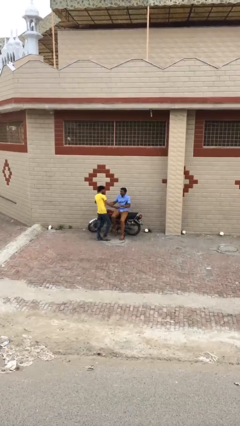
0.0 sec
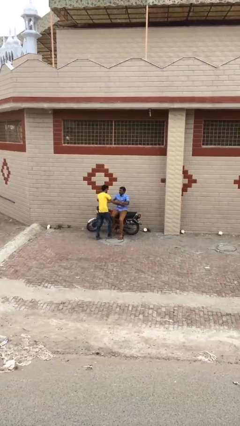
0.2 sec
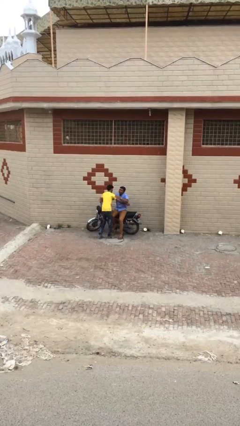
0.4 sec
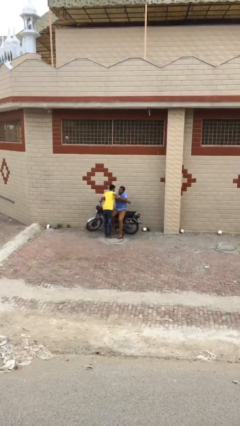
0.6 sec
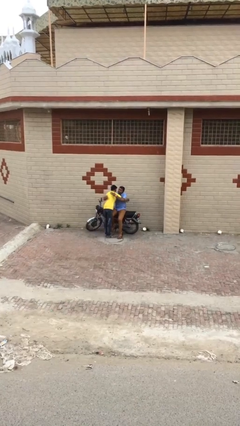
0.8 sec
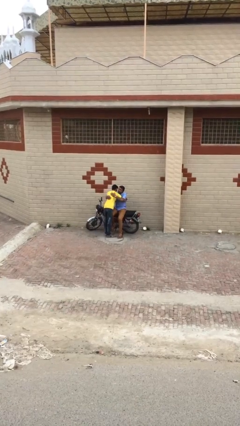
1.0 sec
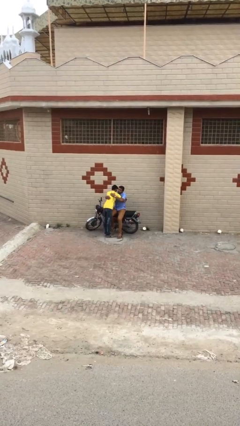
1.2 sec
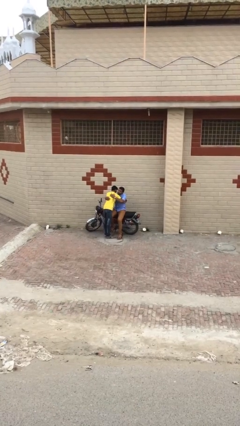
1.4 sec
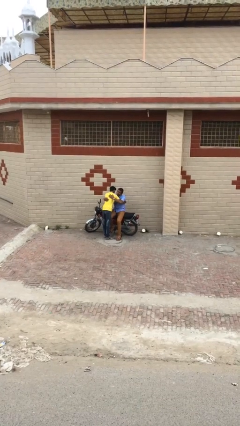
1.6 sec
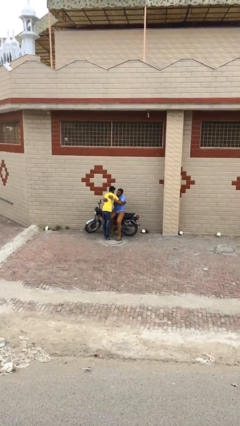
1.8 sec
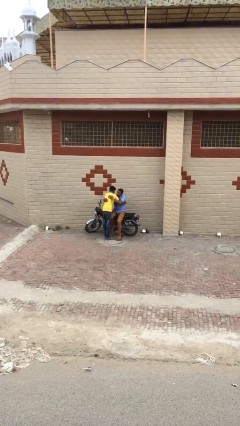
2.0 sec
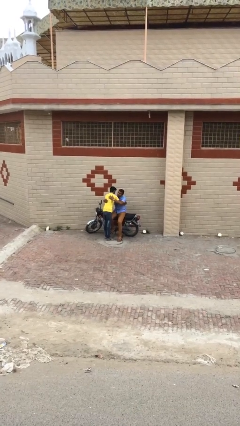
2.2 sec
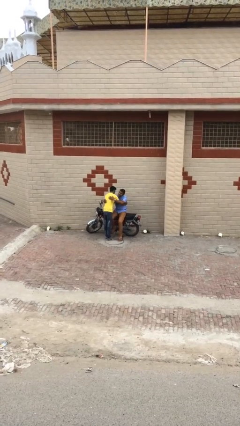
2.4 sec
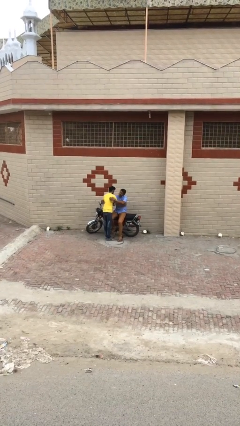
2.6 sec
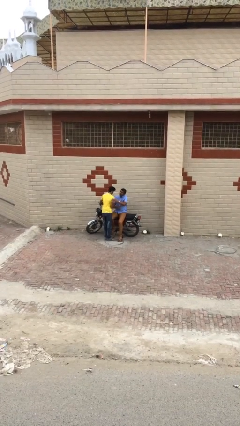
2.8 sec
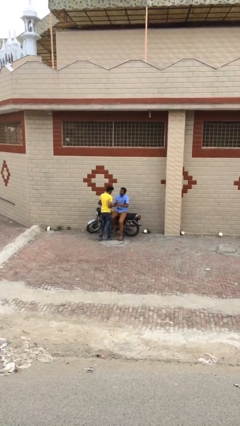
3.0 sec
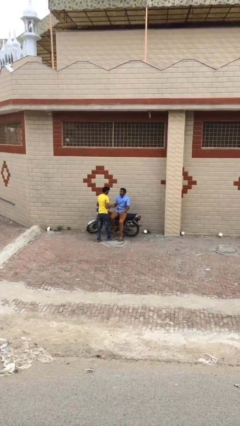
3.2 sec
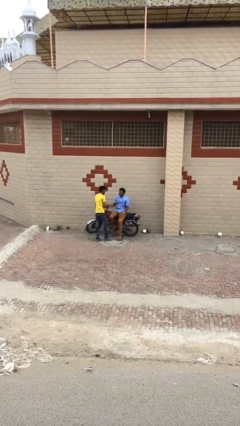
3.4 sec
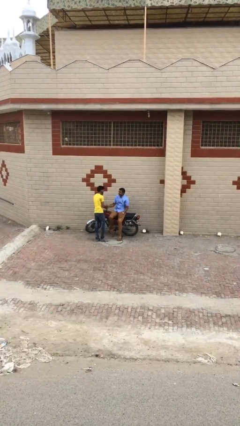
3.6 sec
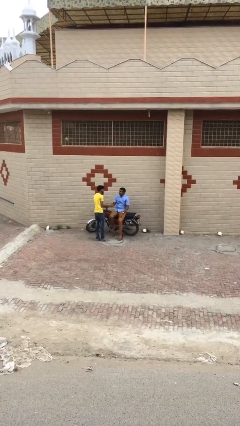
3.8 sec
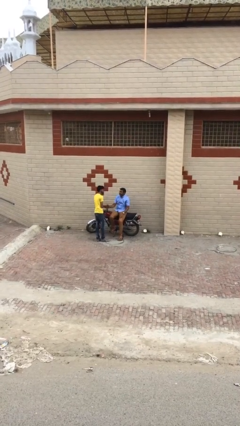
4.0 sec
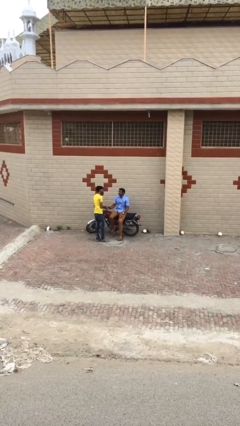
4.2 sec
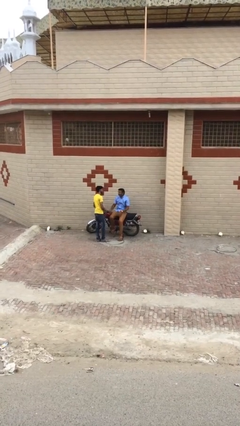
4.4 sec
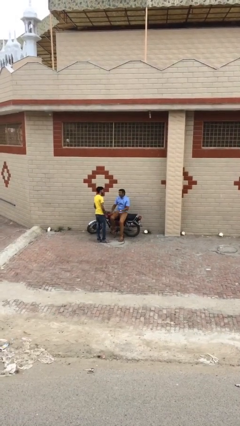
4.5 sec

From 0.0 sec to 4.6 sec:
person embraces person

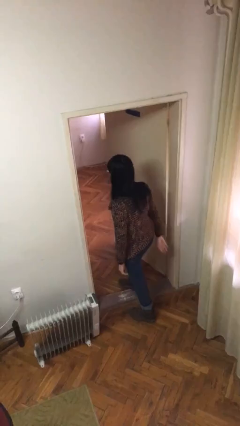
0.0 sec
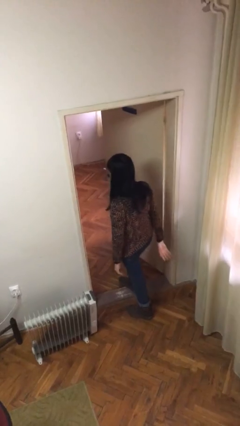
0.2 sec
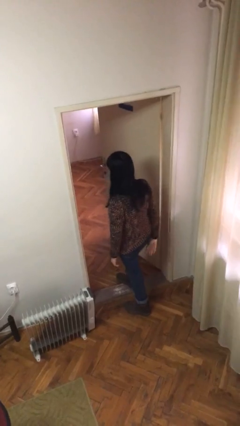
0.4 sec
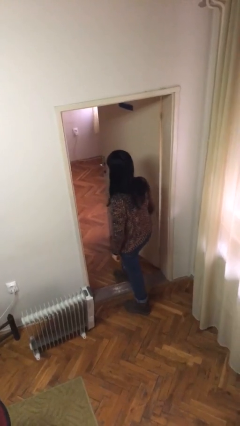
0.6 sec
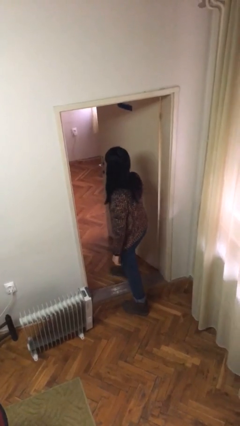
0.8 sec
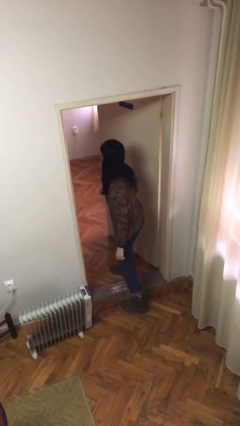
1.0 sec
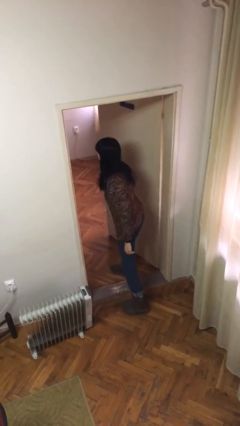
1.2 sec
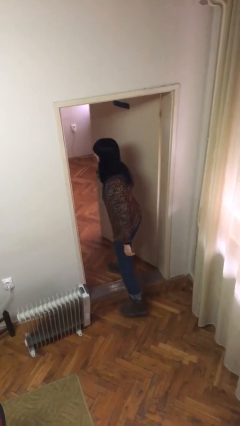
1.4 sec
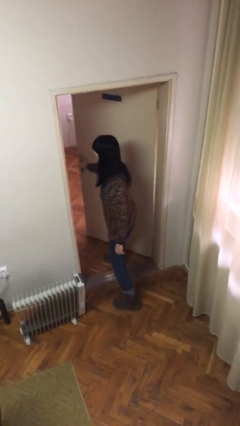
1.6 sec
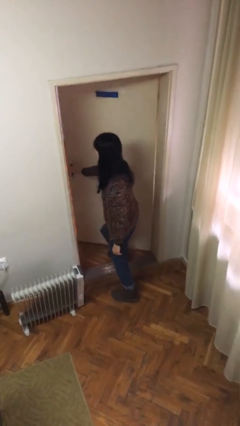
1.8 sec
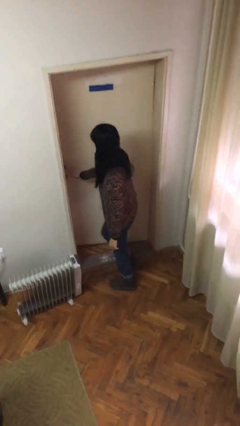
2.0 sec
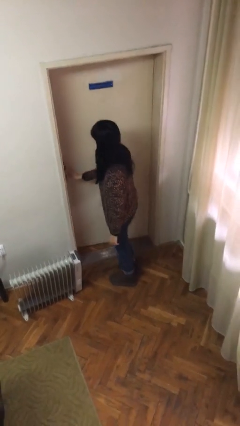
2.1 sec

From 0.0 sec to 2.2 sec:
person closes facility door

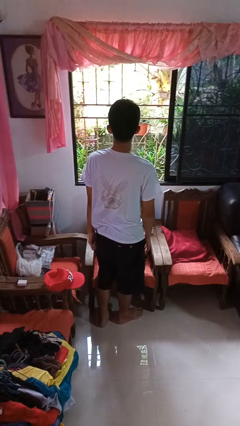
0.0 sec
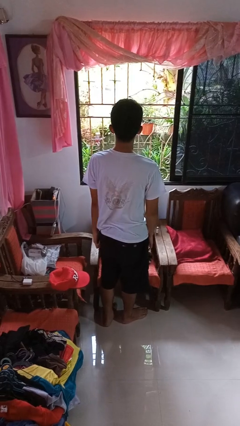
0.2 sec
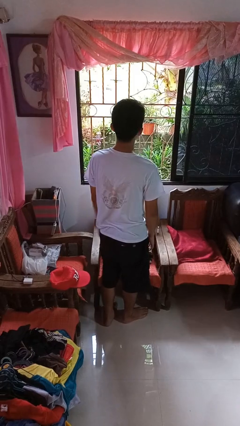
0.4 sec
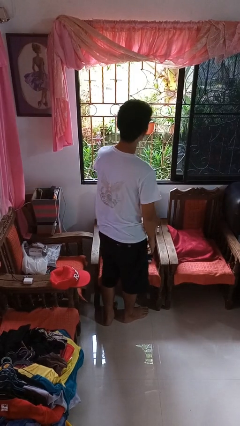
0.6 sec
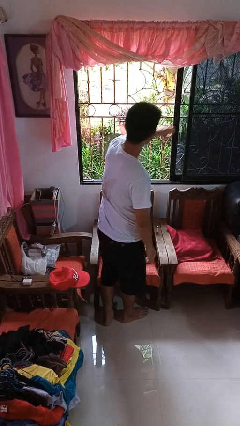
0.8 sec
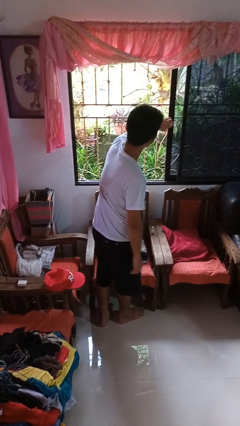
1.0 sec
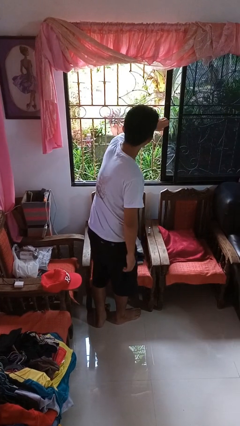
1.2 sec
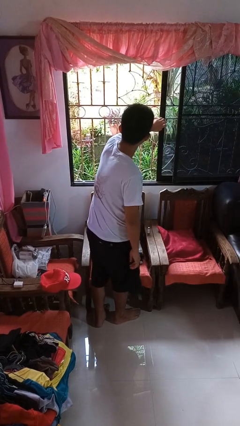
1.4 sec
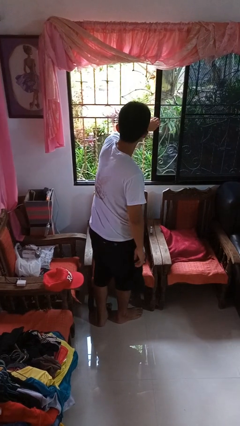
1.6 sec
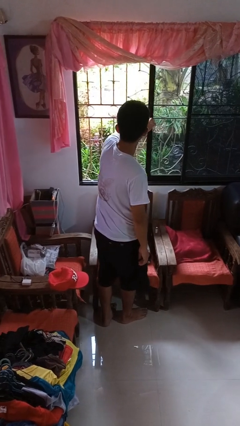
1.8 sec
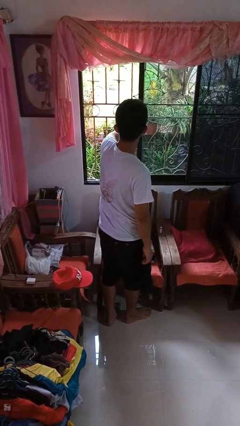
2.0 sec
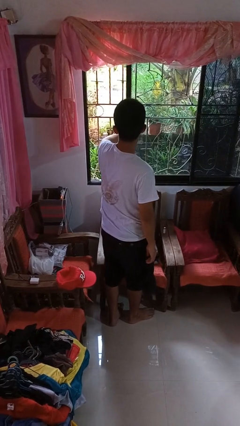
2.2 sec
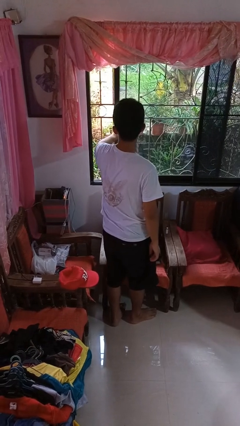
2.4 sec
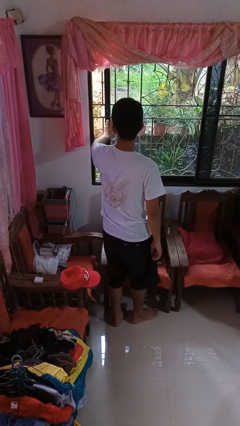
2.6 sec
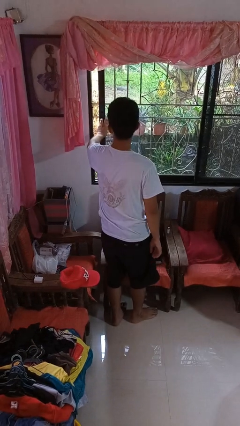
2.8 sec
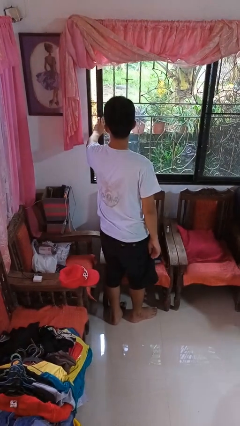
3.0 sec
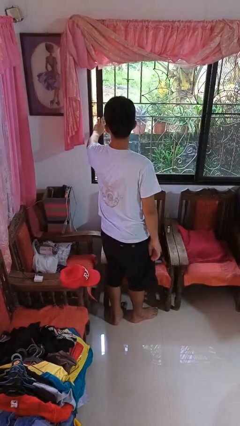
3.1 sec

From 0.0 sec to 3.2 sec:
person closes home window

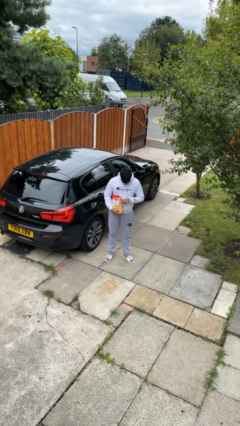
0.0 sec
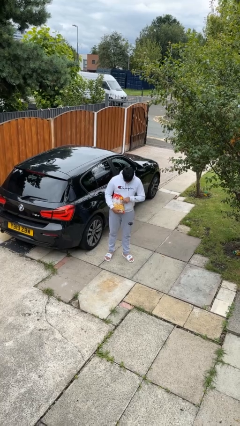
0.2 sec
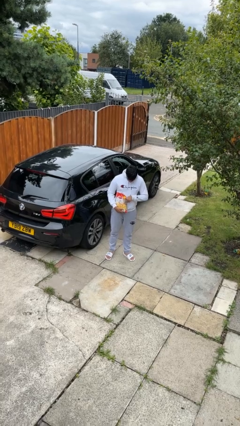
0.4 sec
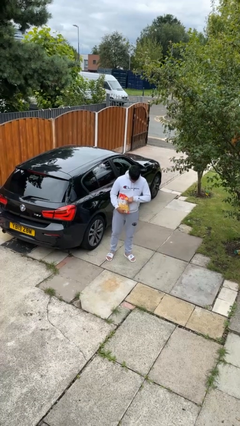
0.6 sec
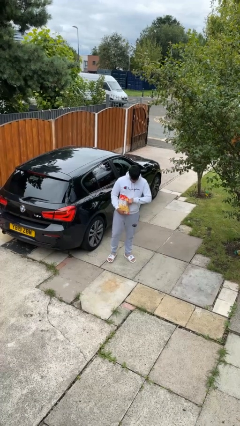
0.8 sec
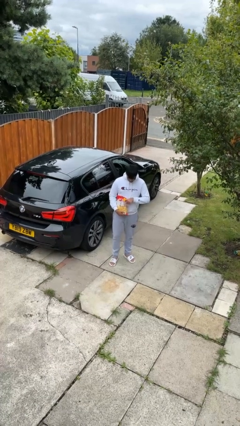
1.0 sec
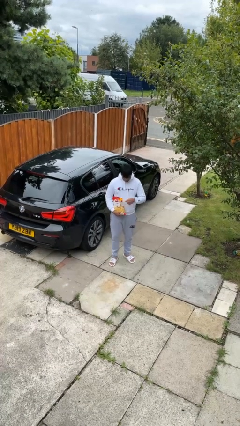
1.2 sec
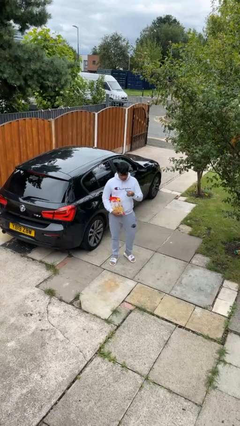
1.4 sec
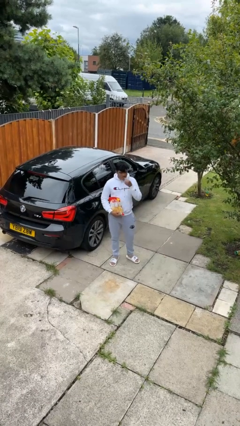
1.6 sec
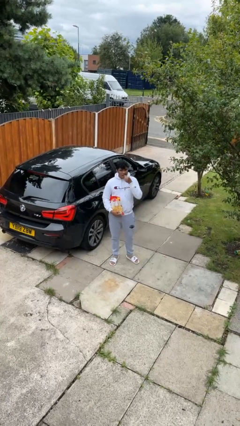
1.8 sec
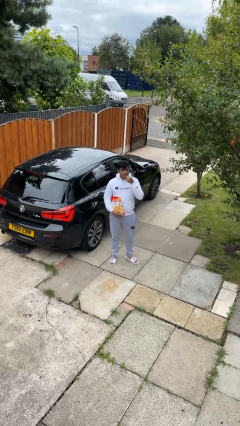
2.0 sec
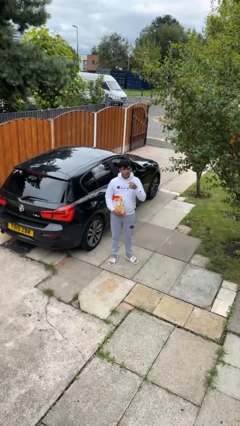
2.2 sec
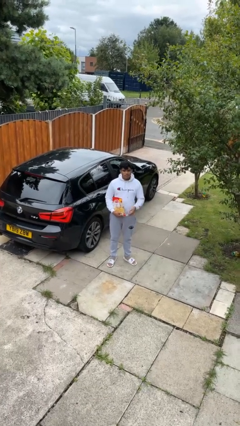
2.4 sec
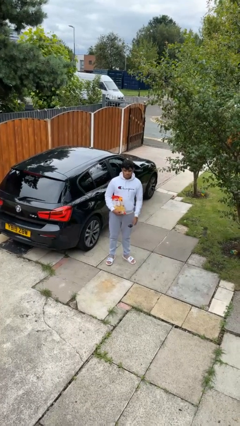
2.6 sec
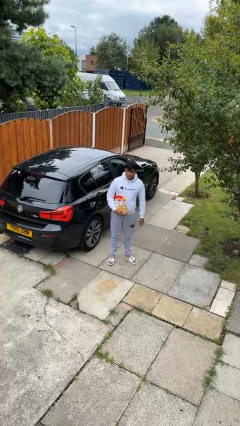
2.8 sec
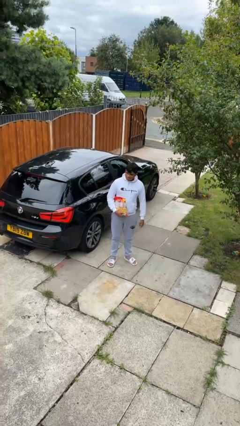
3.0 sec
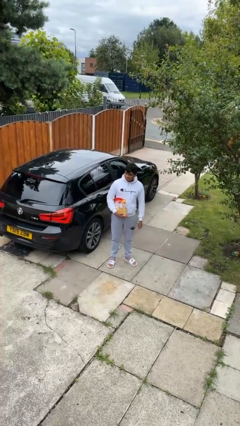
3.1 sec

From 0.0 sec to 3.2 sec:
person eats snack from bag

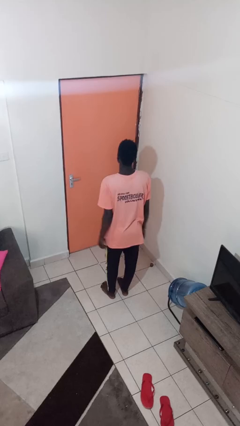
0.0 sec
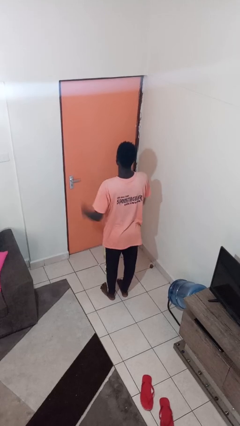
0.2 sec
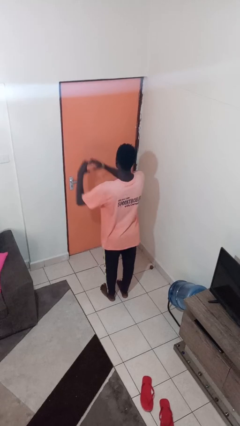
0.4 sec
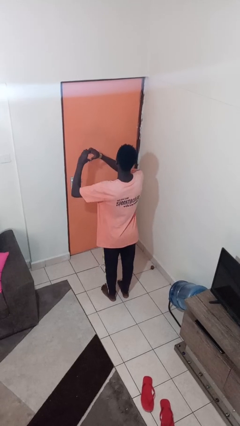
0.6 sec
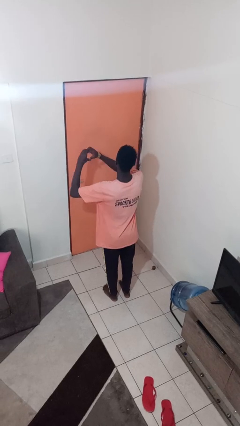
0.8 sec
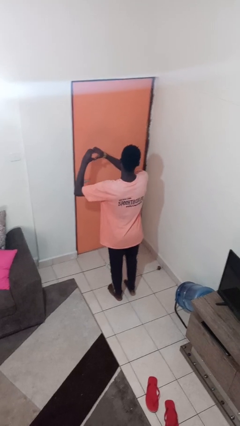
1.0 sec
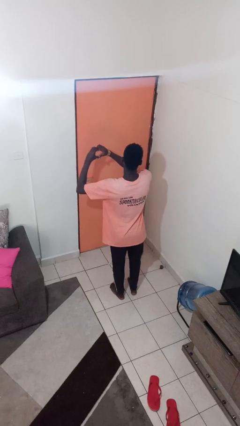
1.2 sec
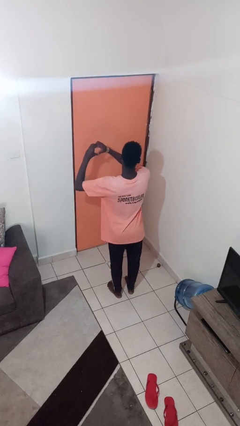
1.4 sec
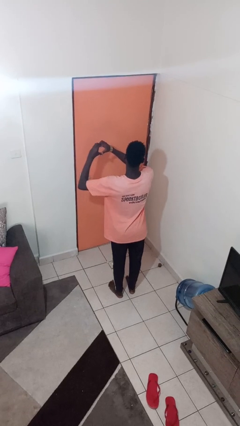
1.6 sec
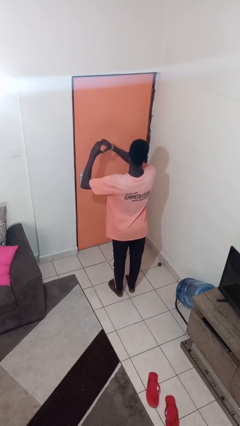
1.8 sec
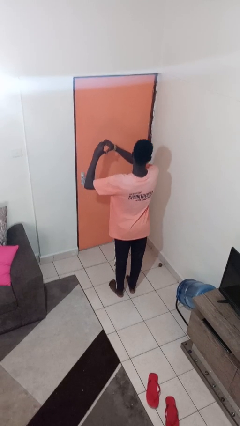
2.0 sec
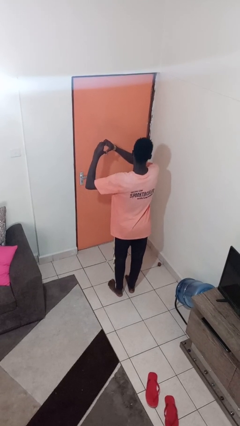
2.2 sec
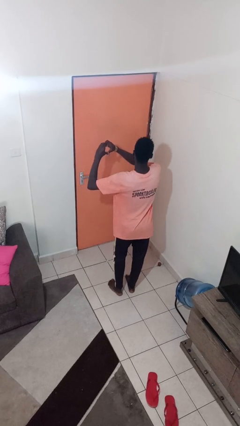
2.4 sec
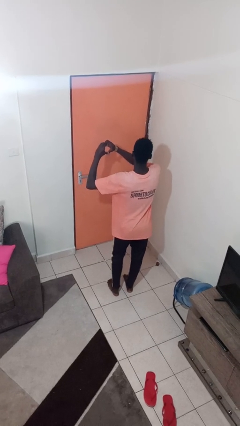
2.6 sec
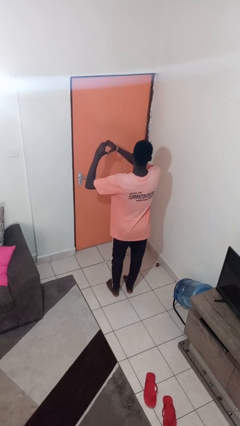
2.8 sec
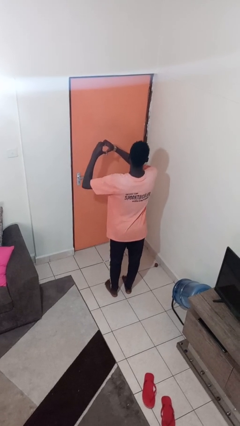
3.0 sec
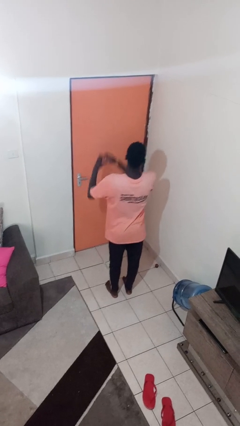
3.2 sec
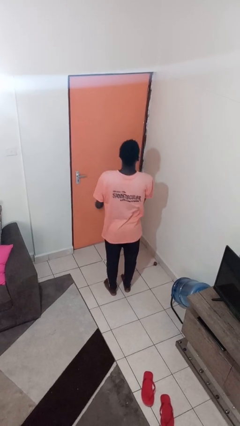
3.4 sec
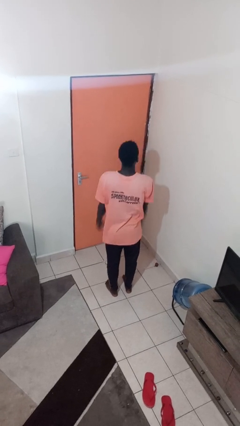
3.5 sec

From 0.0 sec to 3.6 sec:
person gestures heart

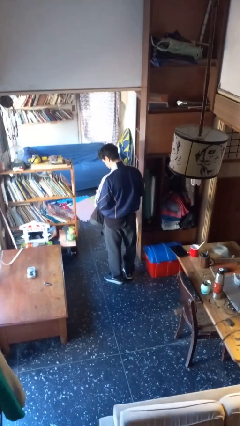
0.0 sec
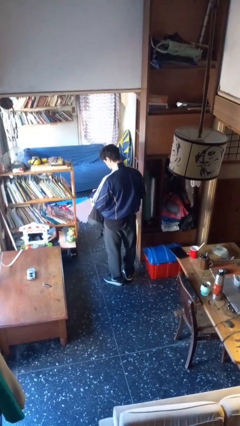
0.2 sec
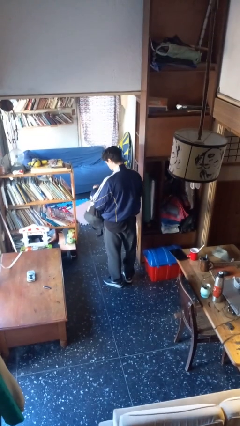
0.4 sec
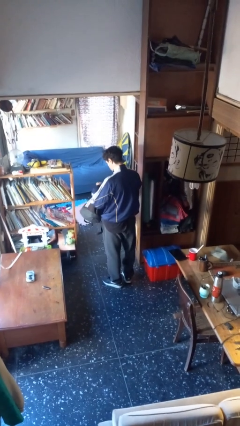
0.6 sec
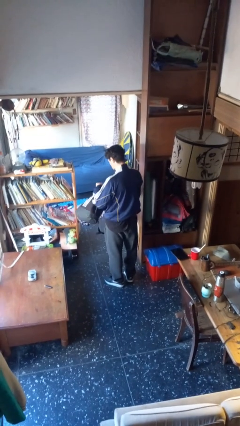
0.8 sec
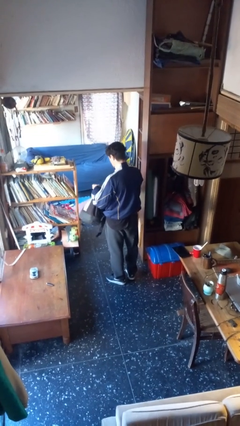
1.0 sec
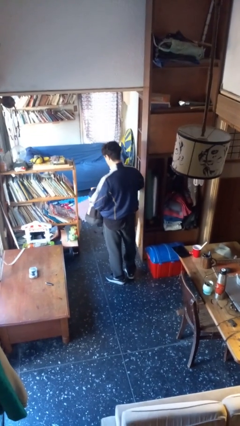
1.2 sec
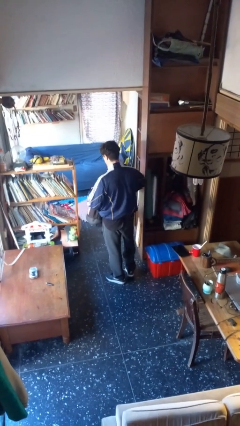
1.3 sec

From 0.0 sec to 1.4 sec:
person puts object into backpack
